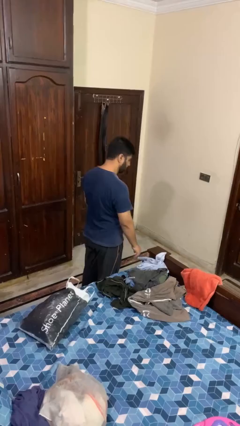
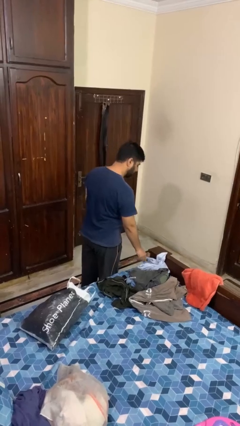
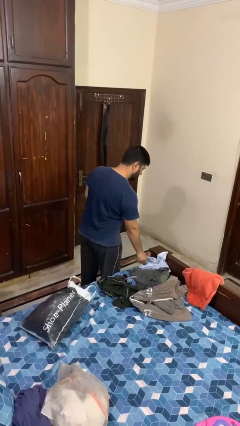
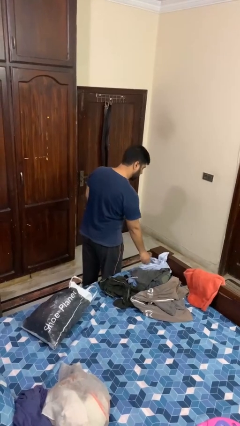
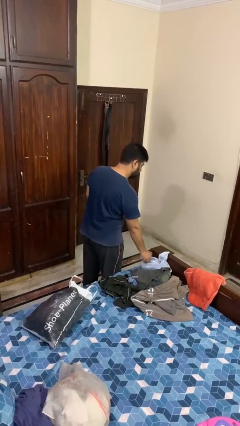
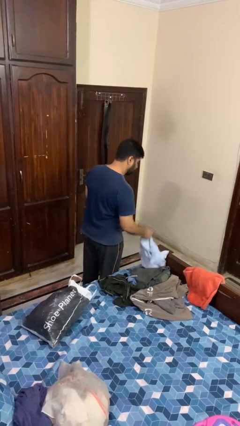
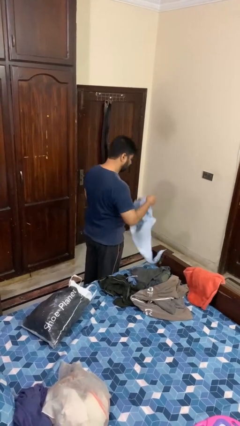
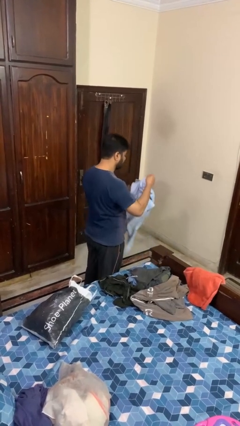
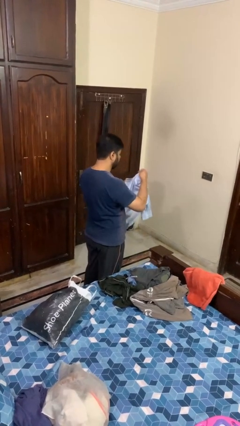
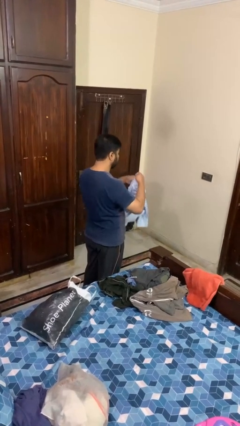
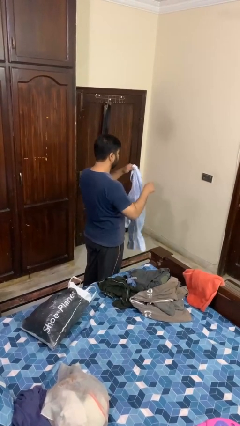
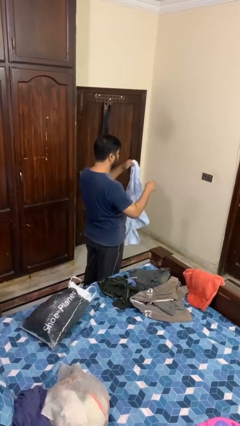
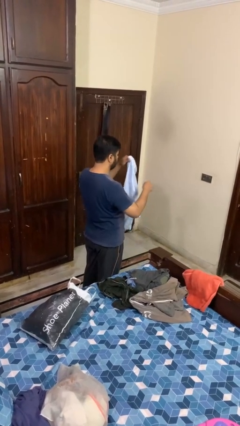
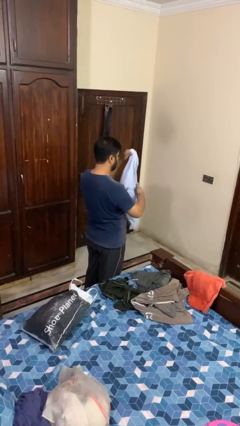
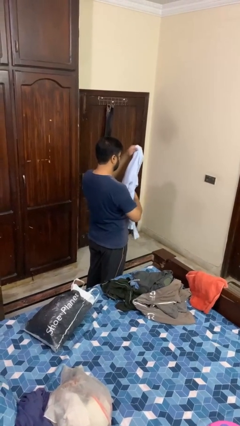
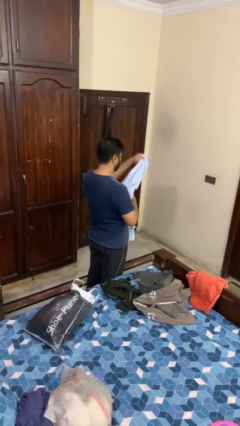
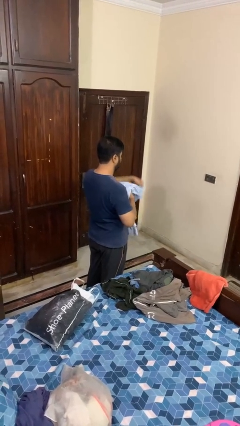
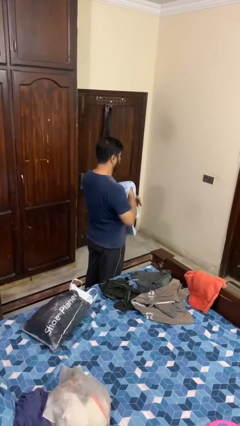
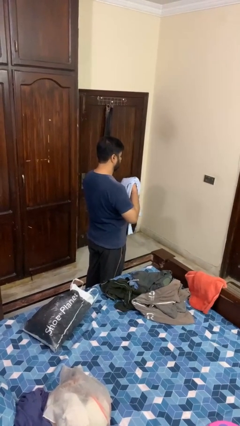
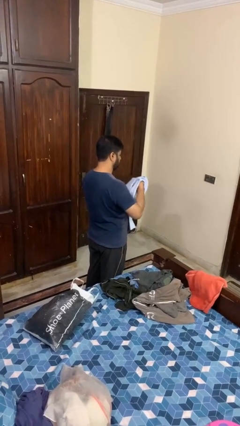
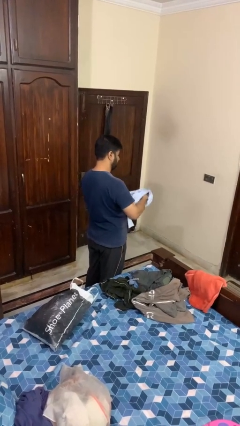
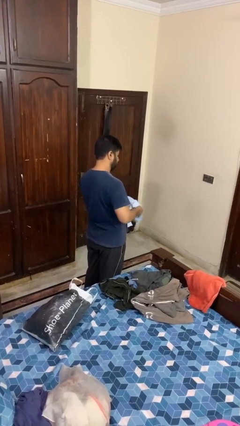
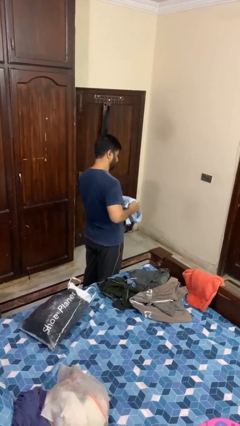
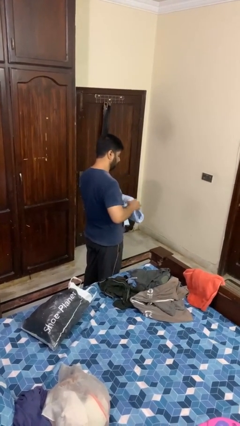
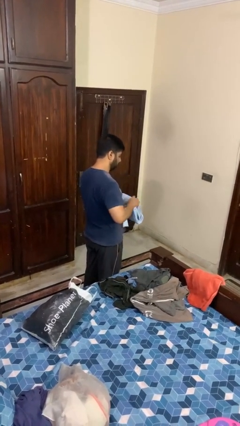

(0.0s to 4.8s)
person folds shirt

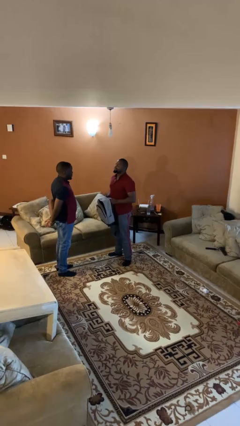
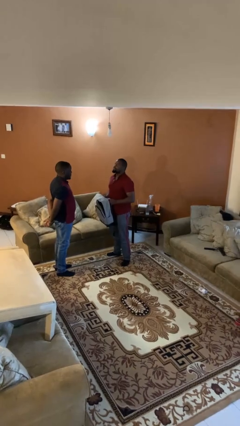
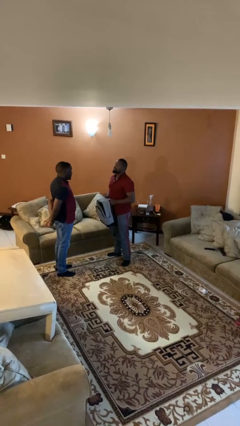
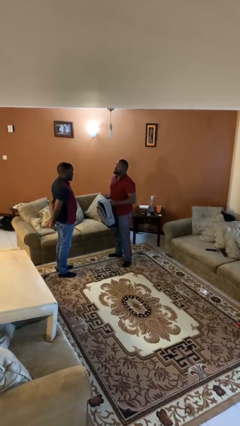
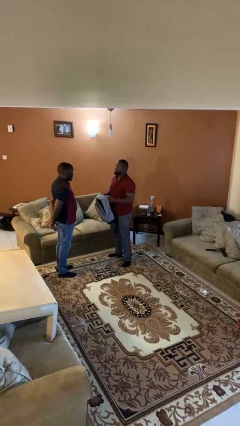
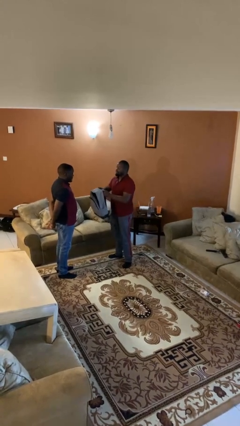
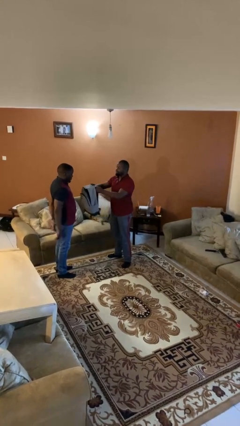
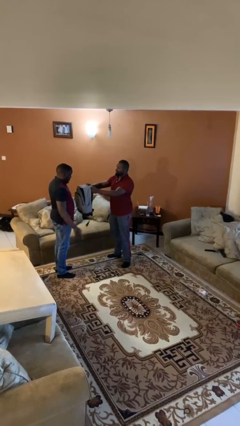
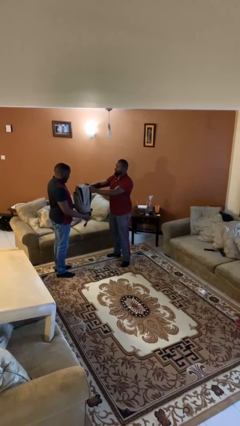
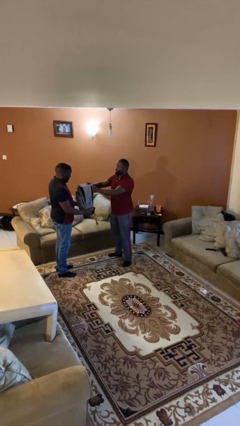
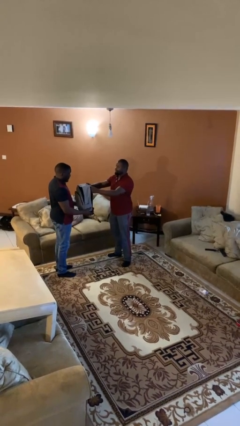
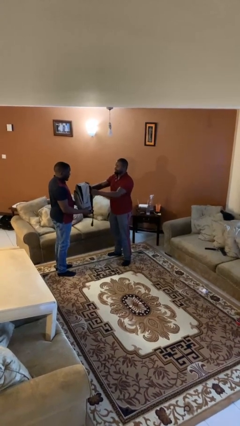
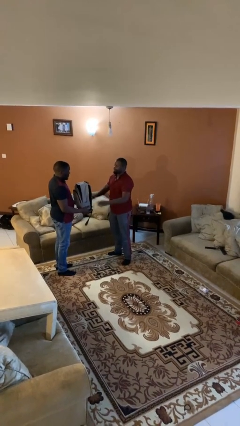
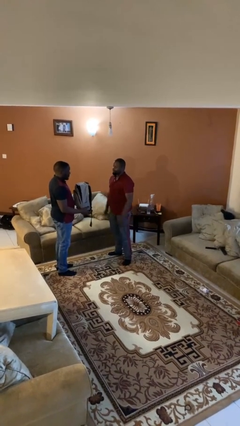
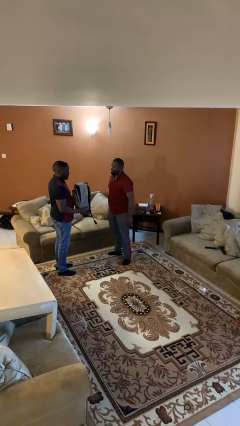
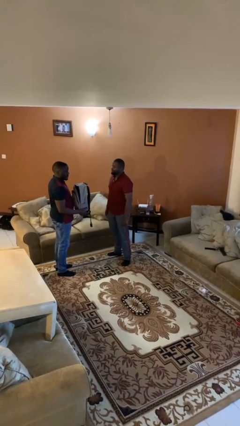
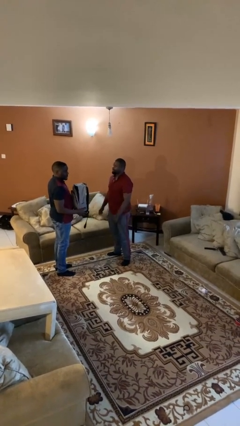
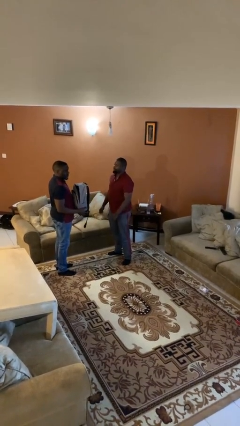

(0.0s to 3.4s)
person transfers object to person

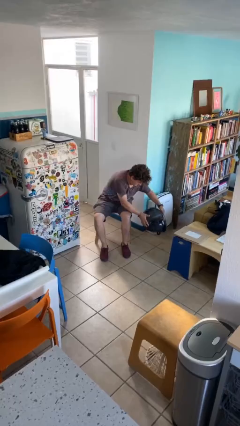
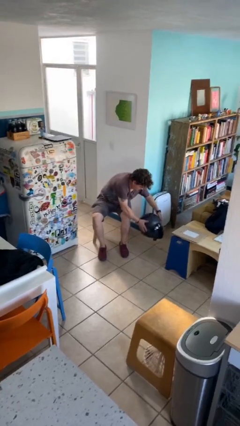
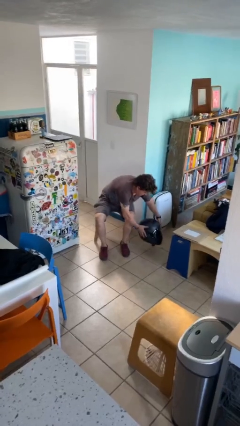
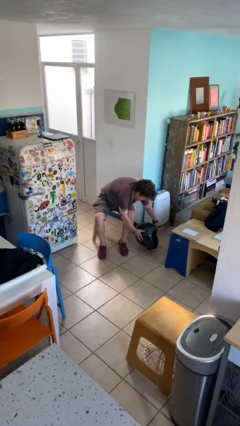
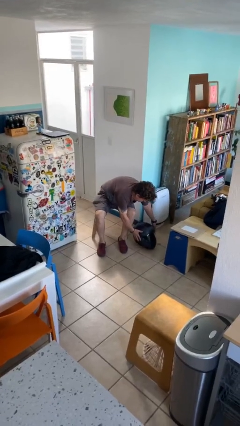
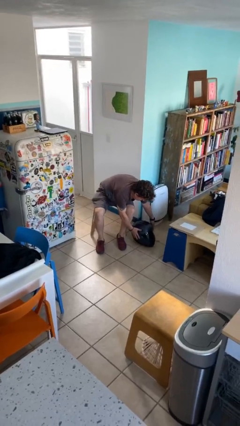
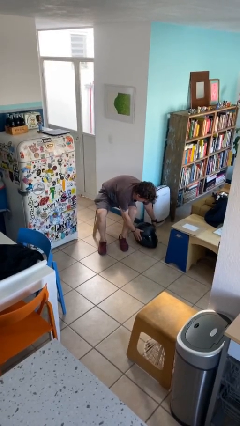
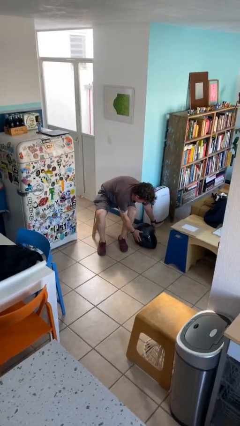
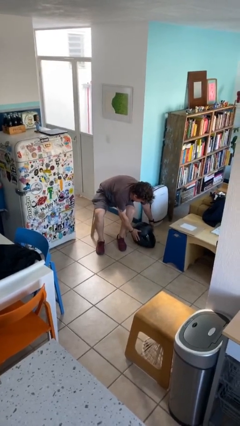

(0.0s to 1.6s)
person puts down object on floor

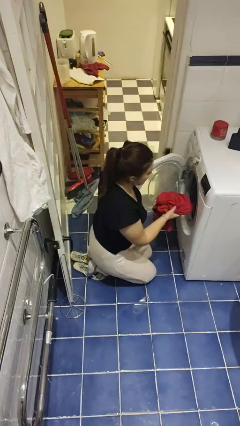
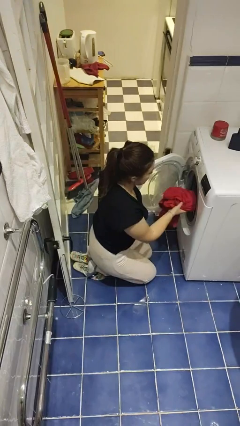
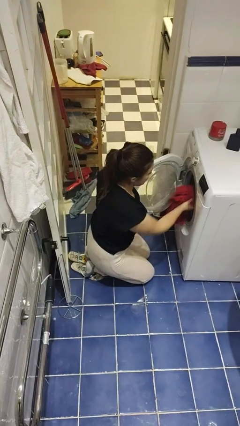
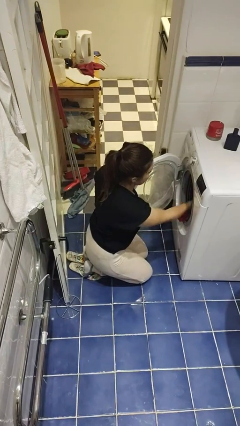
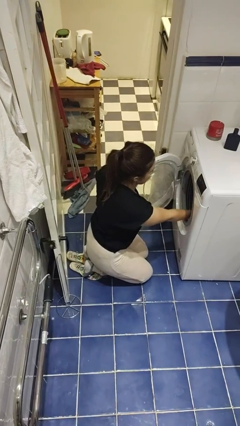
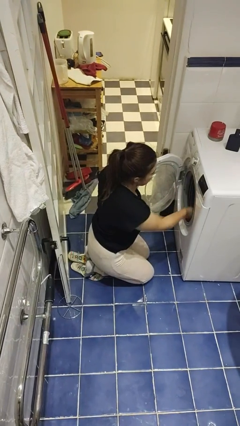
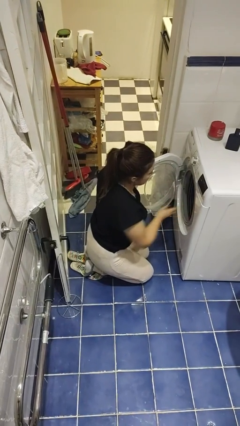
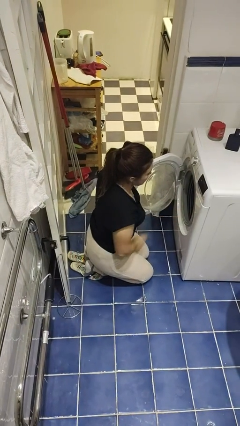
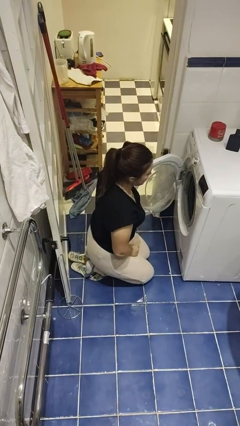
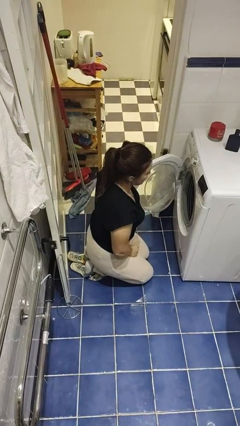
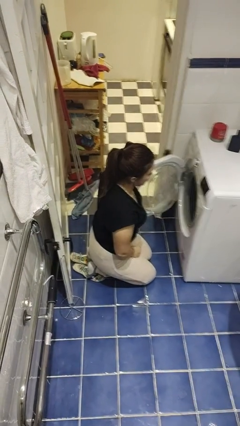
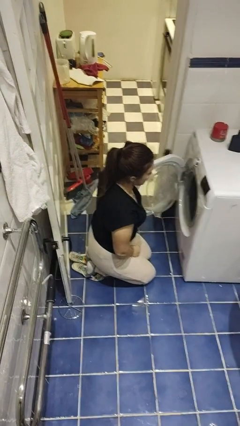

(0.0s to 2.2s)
person loads dryer

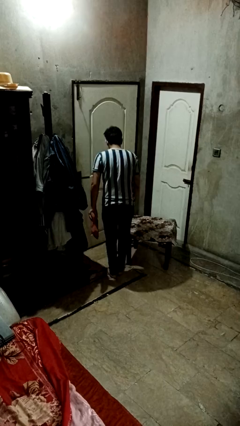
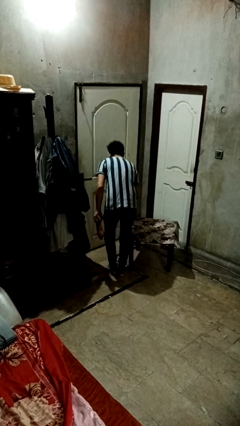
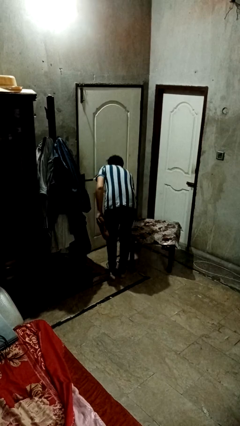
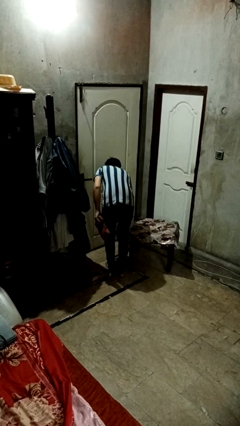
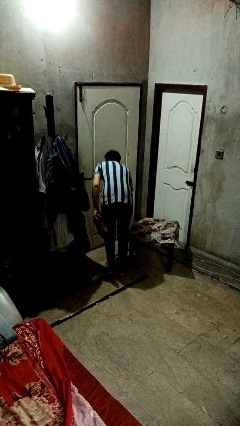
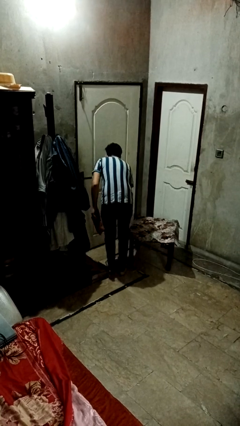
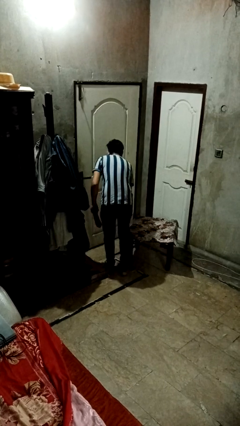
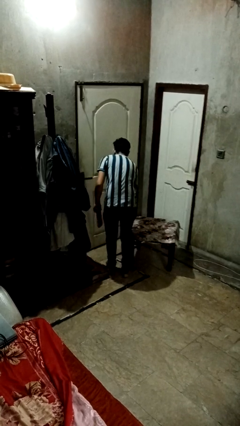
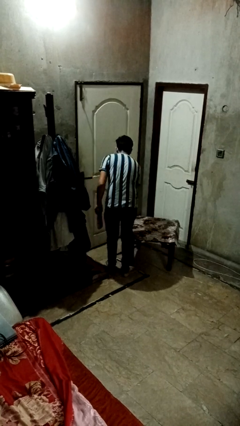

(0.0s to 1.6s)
person bumps into table

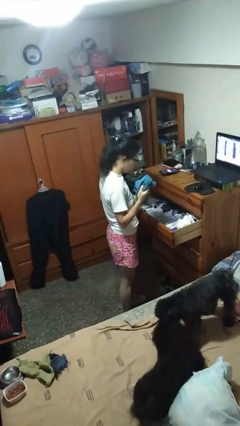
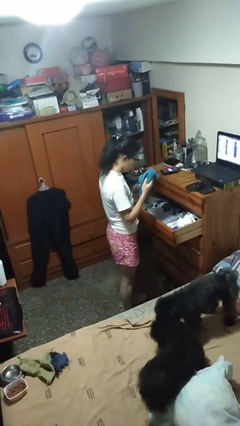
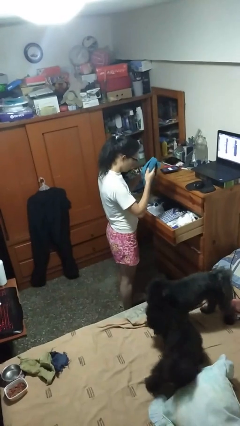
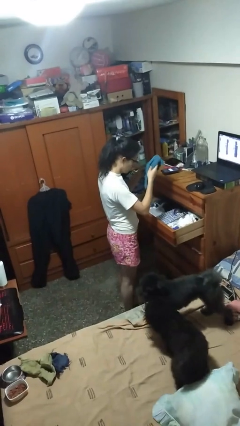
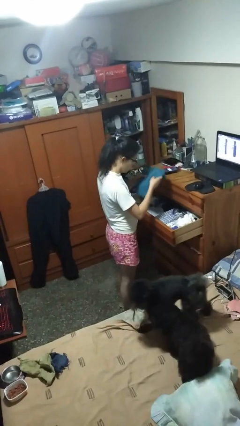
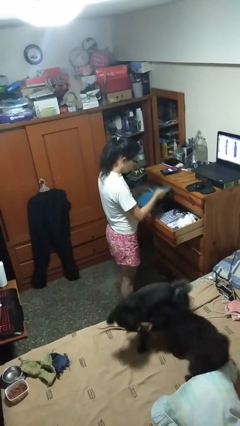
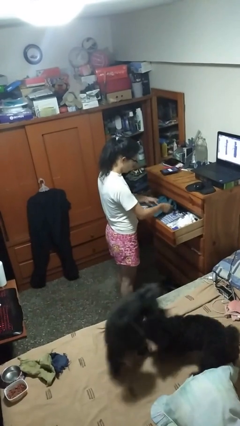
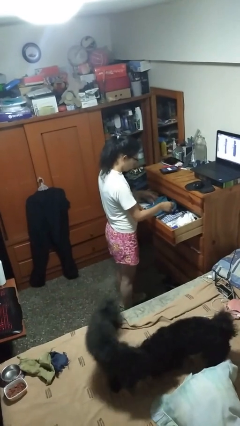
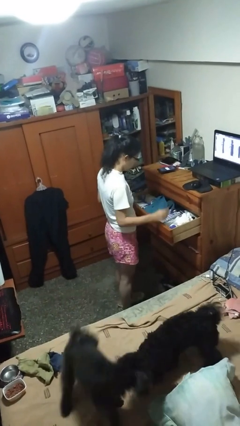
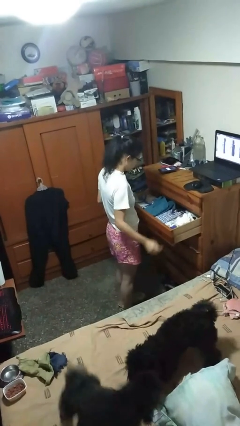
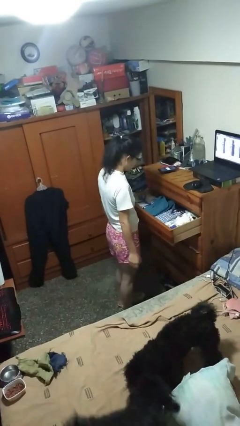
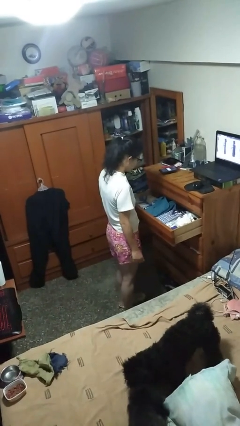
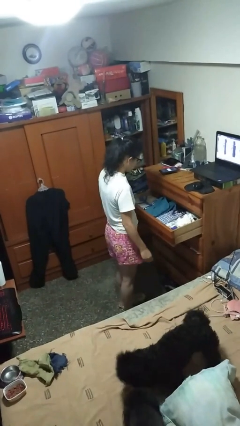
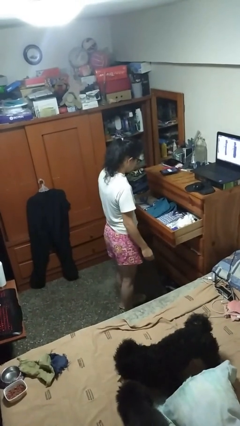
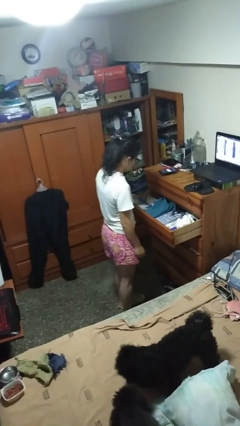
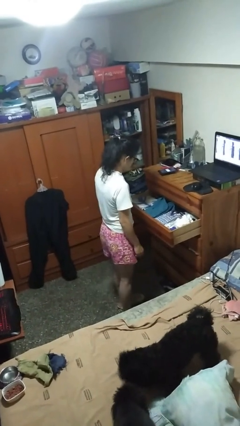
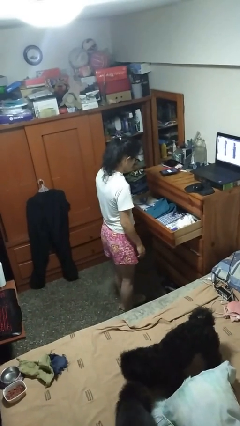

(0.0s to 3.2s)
person puts clothes into dresser

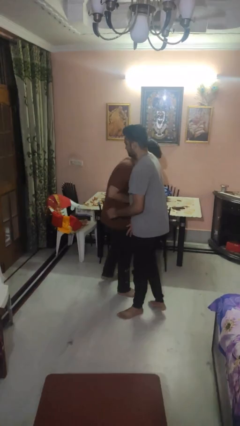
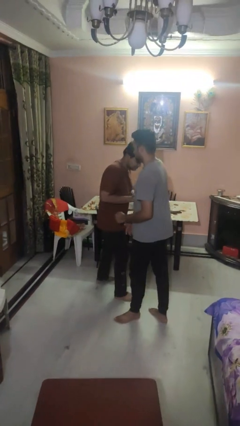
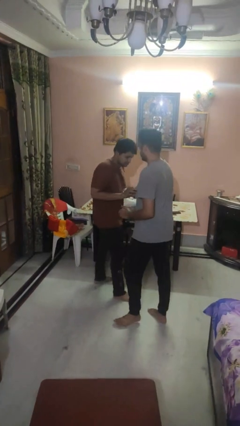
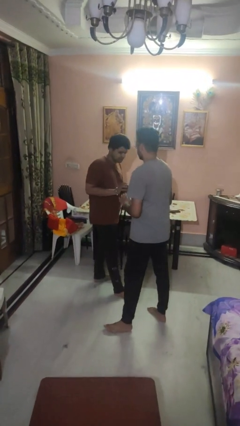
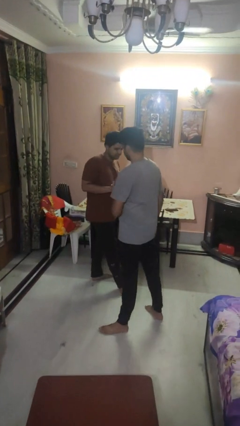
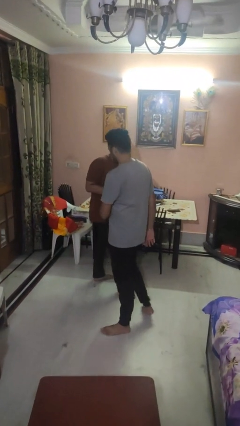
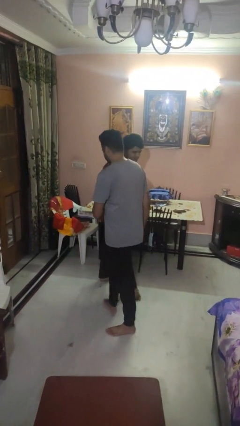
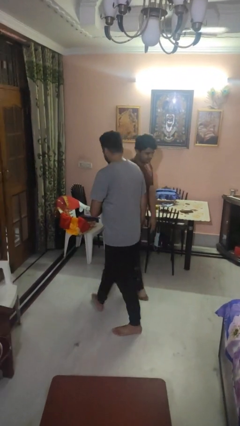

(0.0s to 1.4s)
person bumps into person
